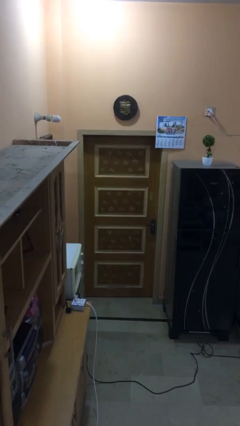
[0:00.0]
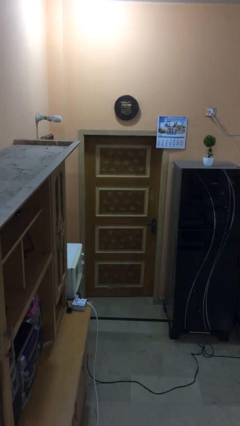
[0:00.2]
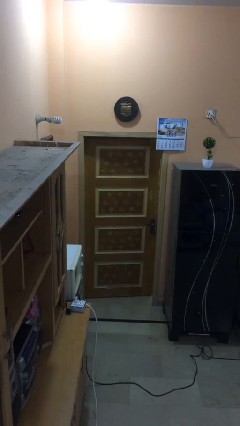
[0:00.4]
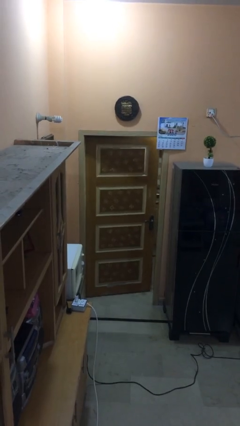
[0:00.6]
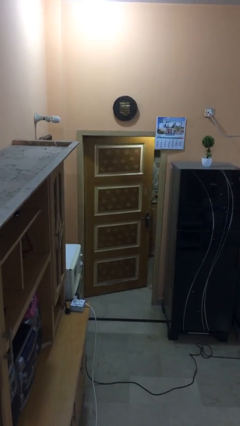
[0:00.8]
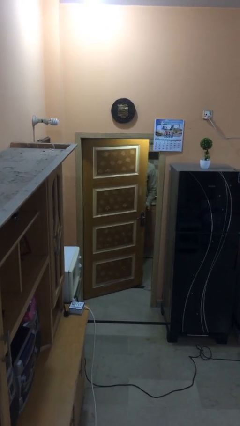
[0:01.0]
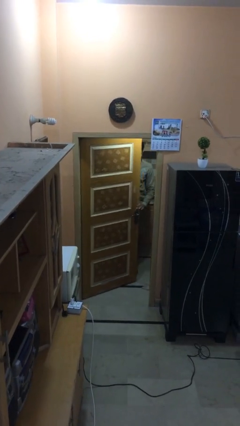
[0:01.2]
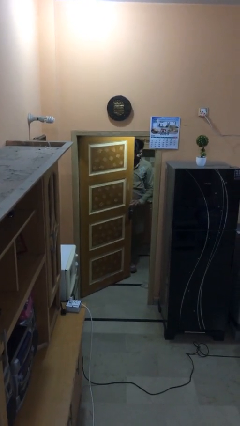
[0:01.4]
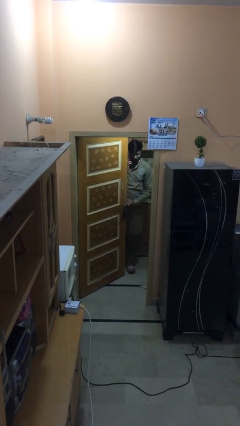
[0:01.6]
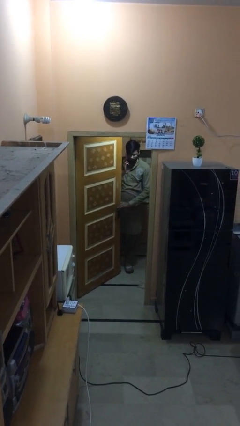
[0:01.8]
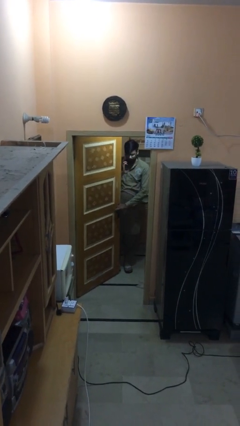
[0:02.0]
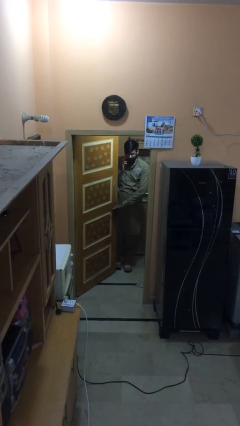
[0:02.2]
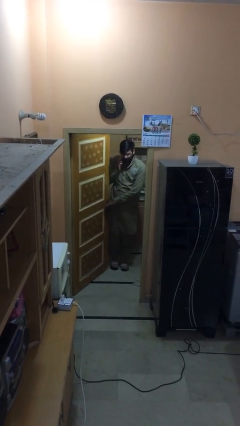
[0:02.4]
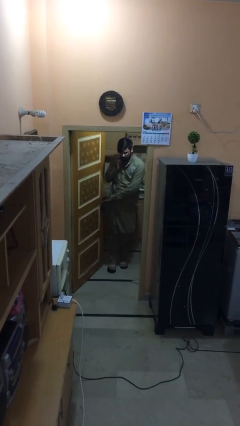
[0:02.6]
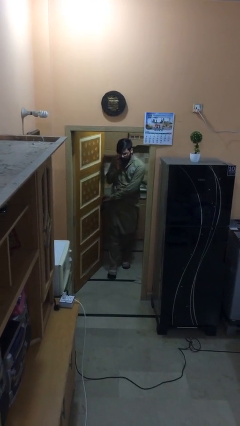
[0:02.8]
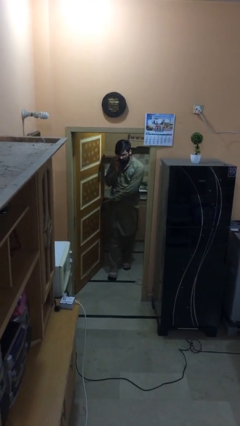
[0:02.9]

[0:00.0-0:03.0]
person opens facility door

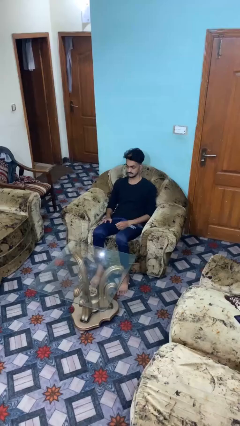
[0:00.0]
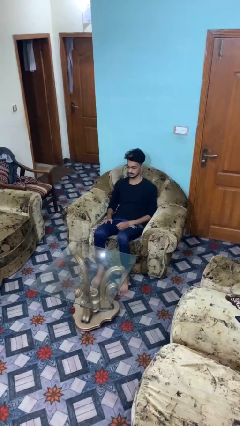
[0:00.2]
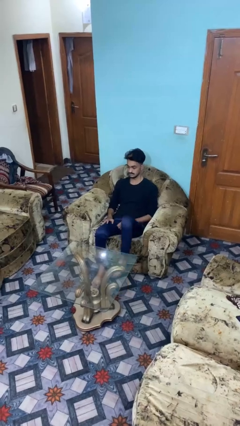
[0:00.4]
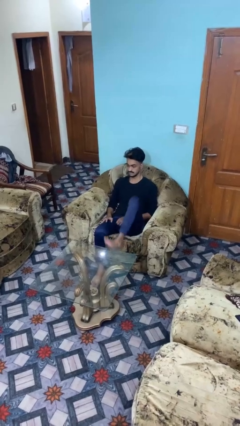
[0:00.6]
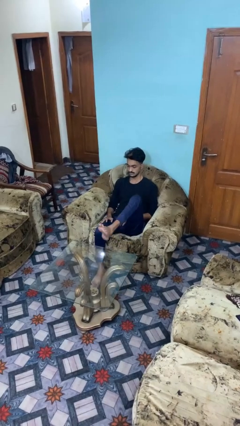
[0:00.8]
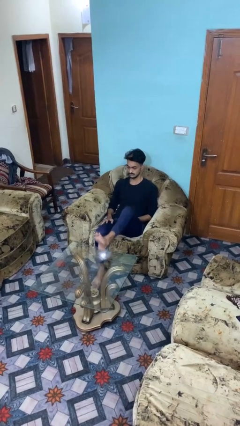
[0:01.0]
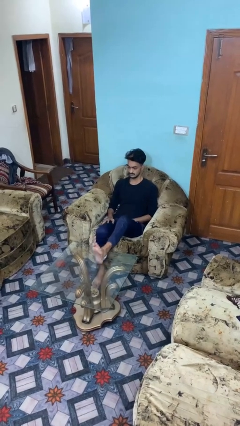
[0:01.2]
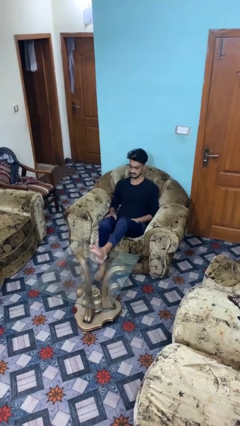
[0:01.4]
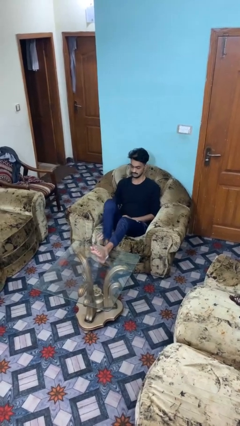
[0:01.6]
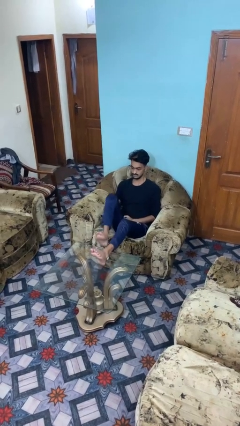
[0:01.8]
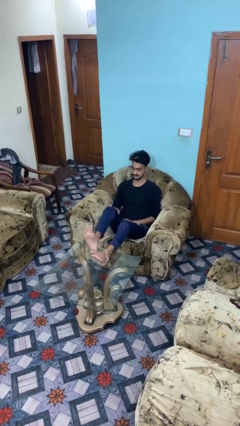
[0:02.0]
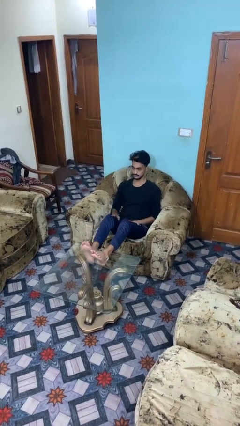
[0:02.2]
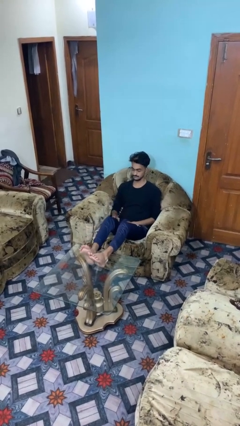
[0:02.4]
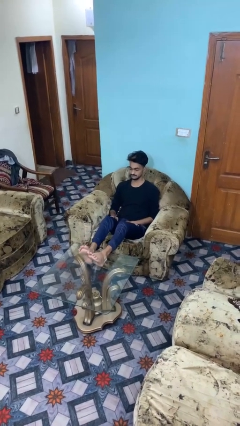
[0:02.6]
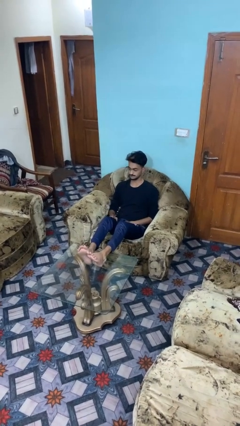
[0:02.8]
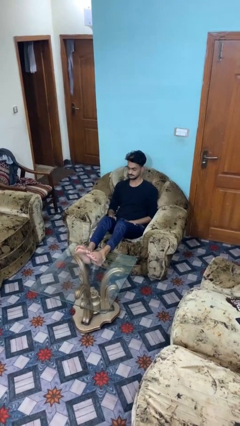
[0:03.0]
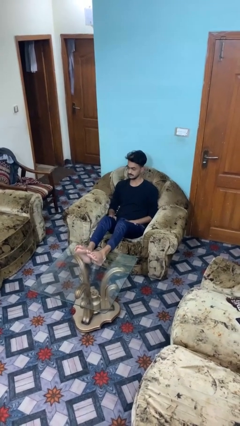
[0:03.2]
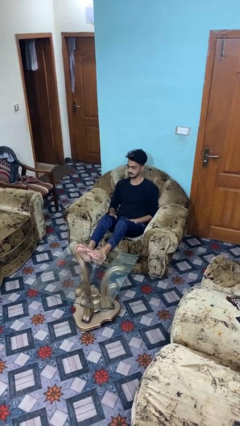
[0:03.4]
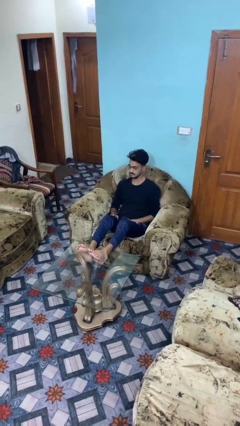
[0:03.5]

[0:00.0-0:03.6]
person puts feet up

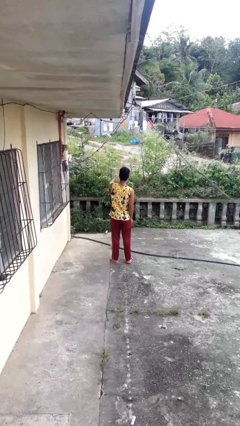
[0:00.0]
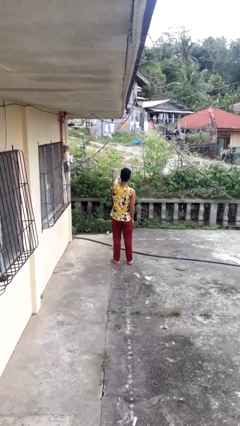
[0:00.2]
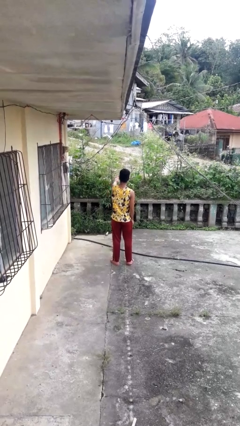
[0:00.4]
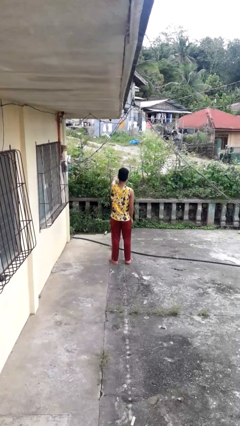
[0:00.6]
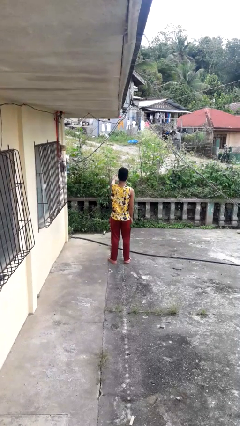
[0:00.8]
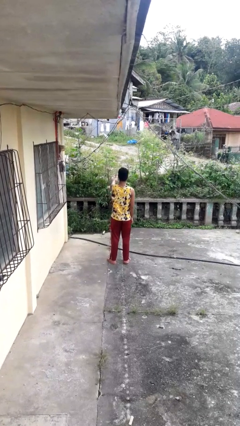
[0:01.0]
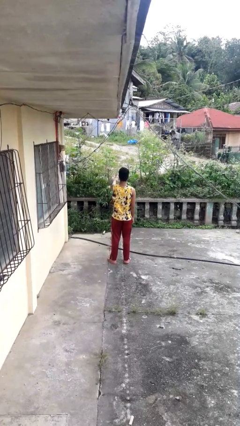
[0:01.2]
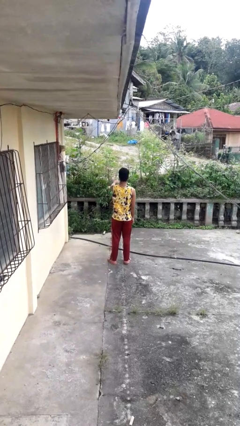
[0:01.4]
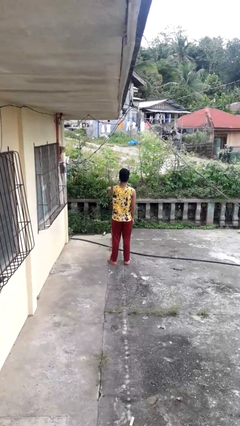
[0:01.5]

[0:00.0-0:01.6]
person punches

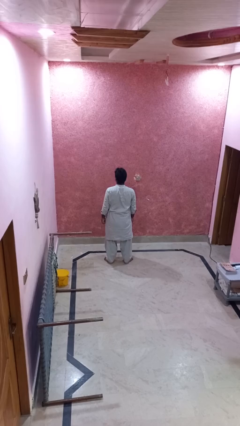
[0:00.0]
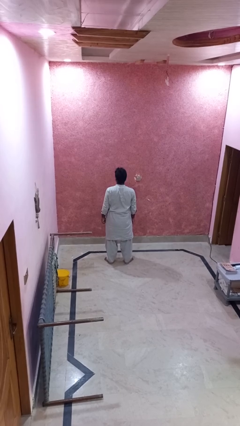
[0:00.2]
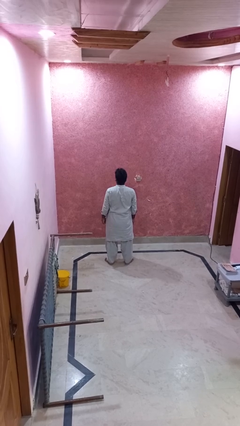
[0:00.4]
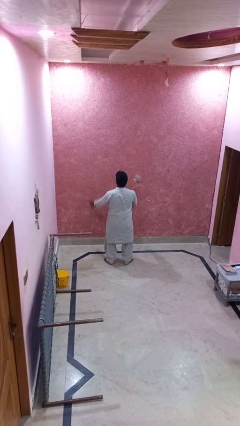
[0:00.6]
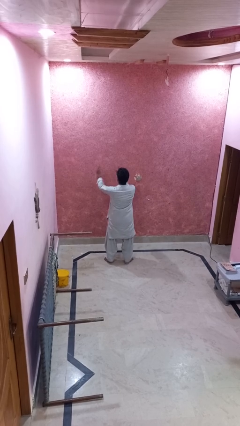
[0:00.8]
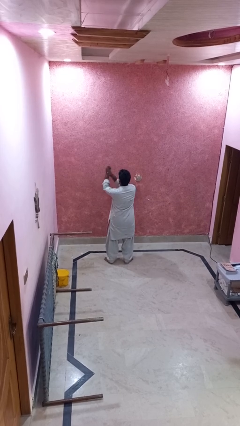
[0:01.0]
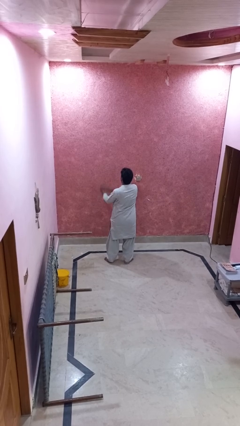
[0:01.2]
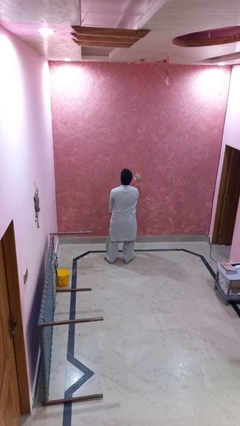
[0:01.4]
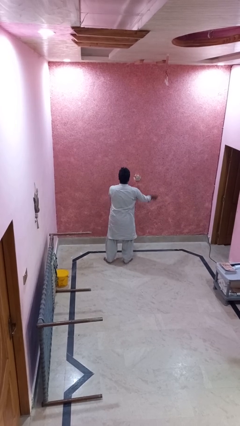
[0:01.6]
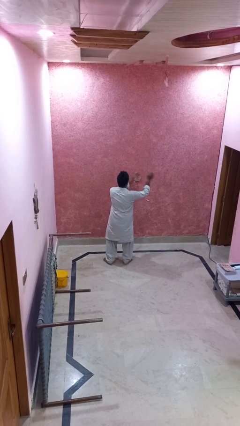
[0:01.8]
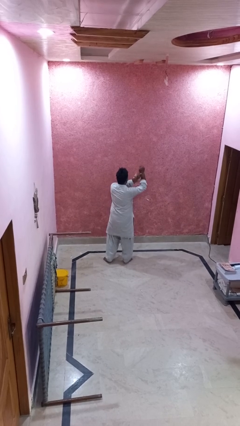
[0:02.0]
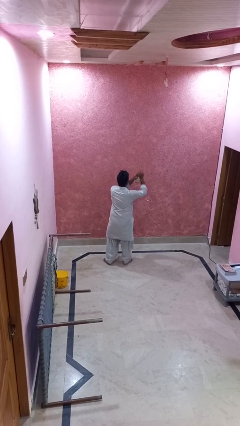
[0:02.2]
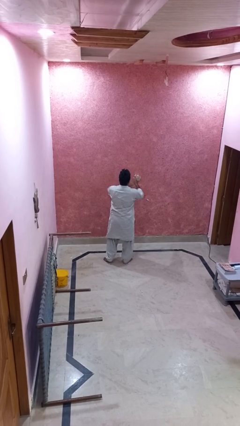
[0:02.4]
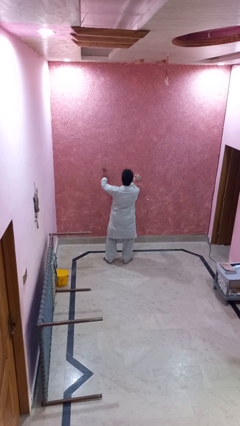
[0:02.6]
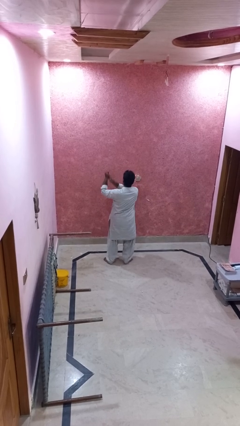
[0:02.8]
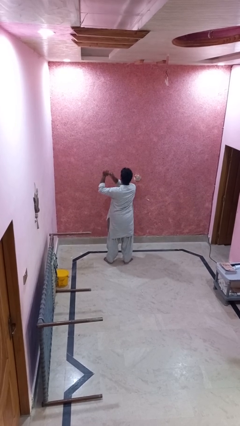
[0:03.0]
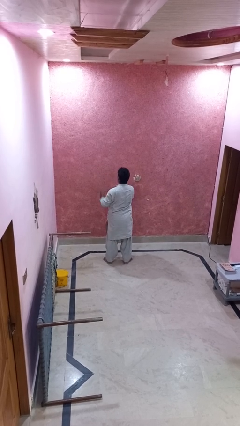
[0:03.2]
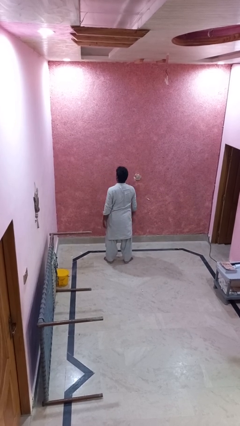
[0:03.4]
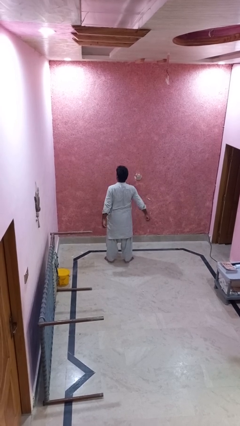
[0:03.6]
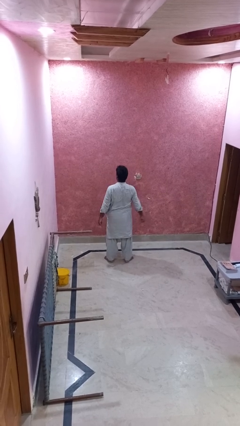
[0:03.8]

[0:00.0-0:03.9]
person dances in place

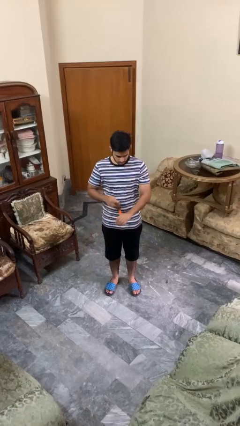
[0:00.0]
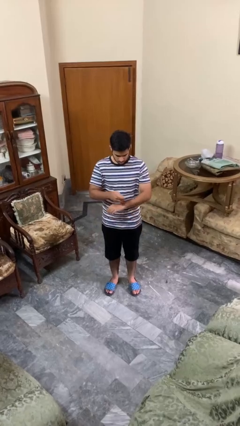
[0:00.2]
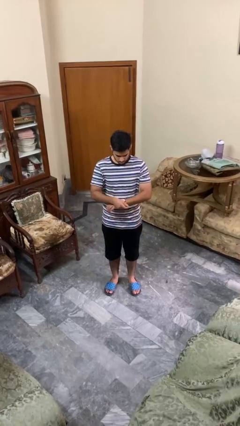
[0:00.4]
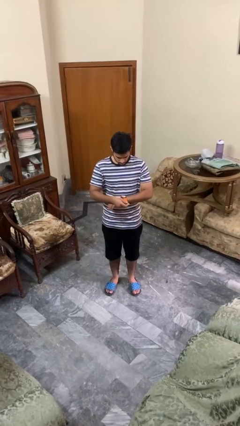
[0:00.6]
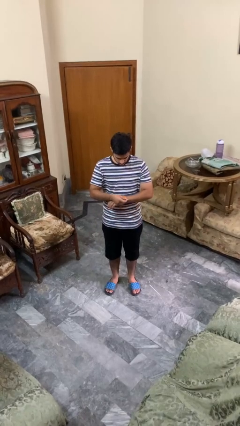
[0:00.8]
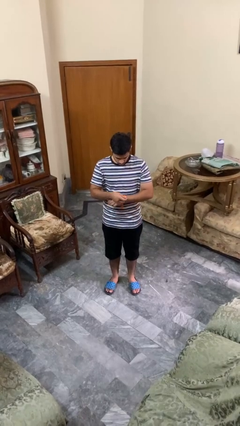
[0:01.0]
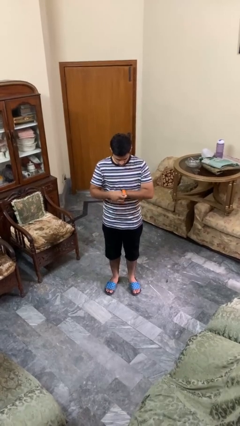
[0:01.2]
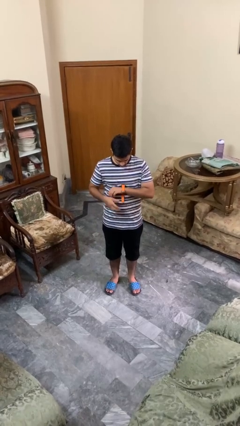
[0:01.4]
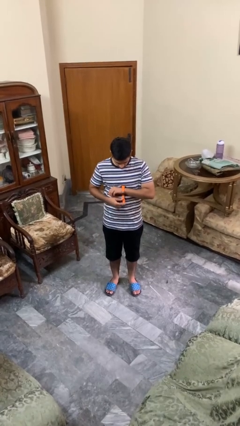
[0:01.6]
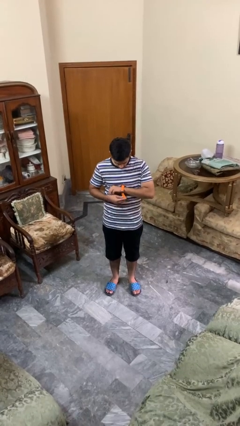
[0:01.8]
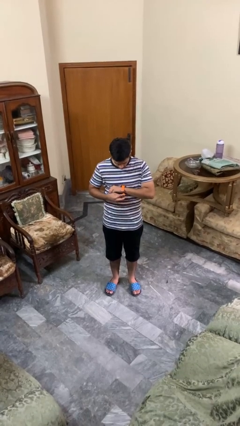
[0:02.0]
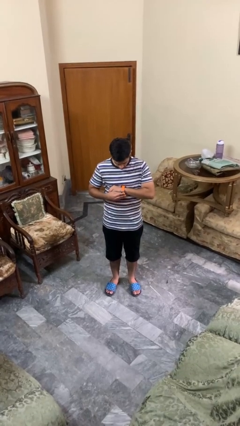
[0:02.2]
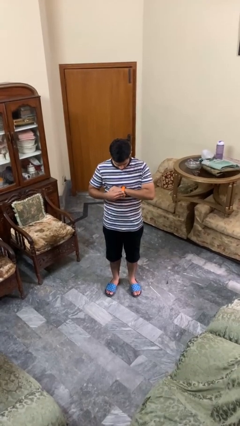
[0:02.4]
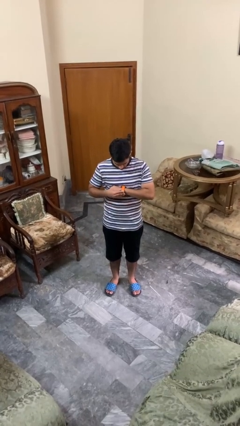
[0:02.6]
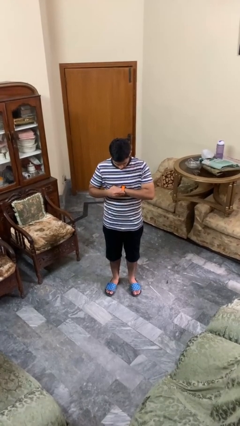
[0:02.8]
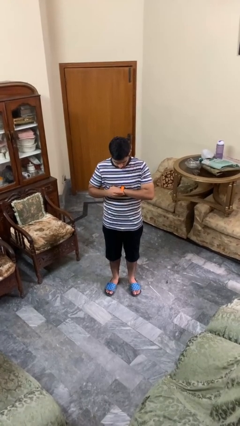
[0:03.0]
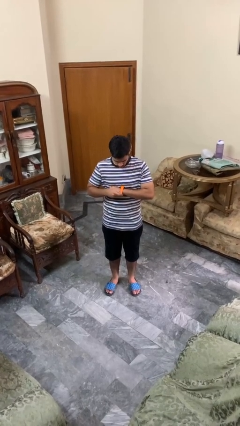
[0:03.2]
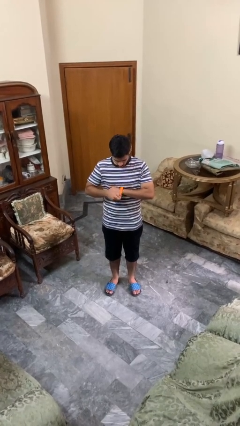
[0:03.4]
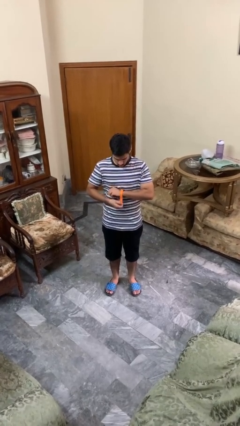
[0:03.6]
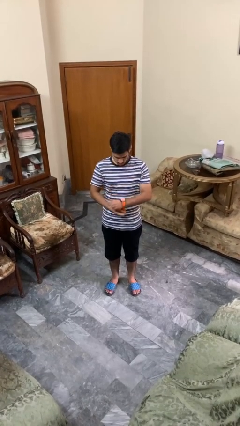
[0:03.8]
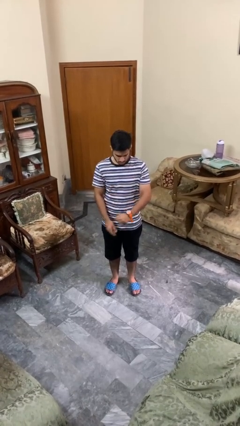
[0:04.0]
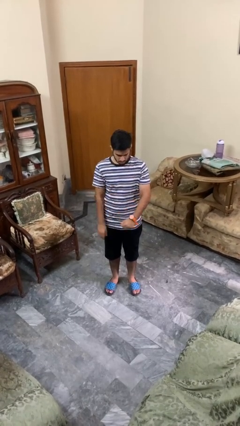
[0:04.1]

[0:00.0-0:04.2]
person puts on wristwatch

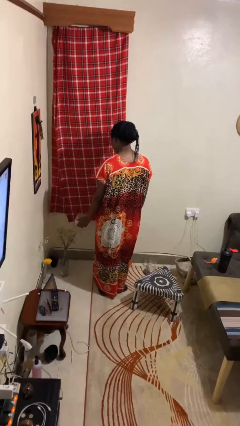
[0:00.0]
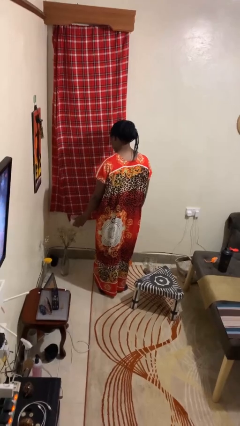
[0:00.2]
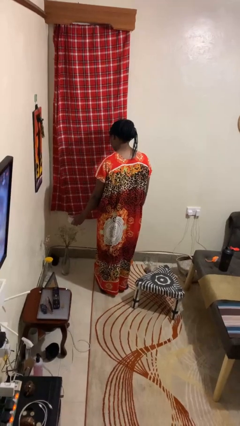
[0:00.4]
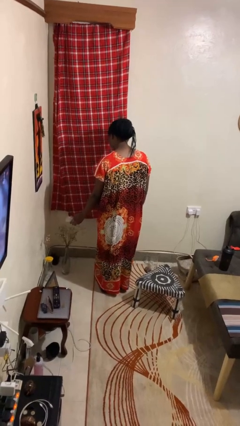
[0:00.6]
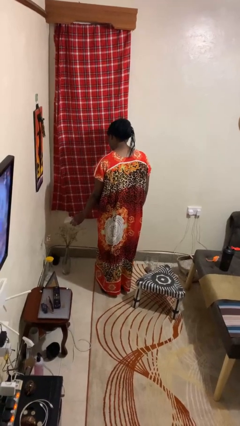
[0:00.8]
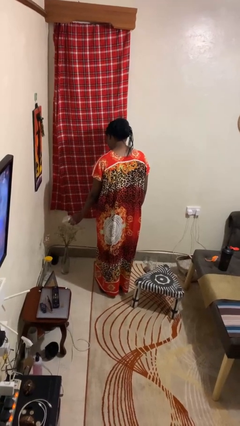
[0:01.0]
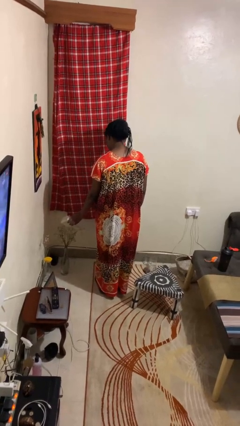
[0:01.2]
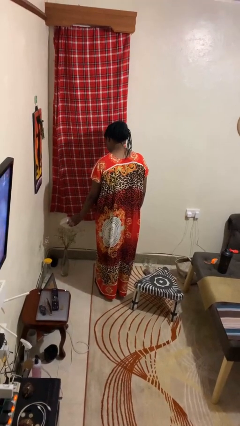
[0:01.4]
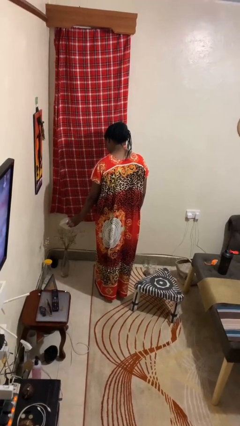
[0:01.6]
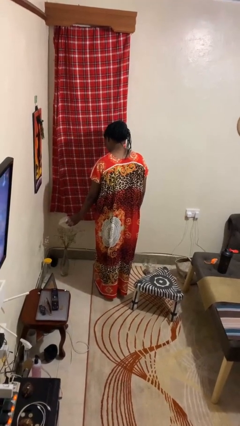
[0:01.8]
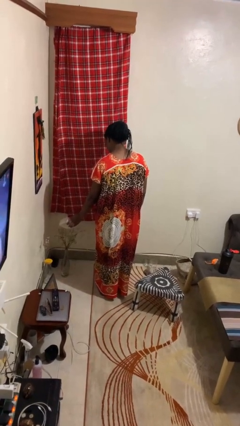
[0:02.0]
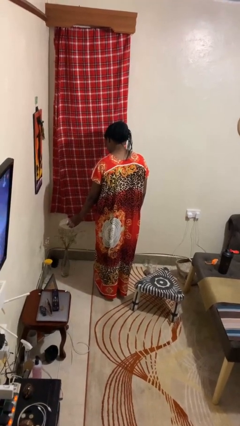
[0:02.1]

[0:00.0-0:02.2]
person waters houseplant
